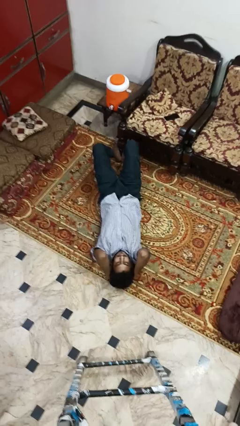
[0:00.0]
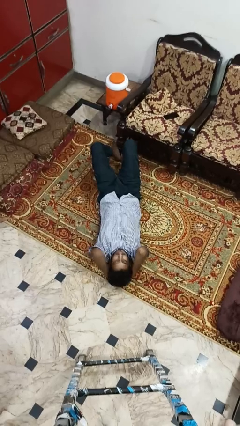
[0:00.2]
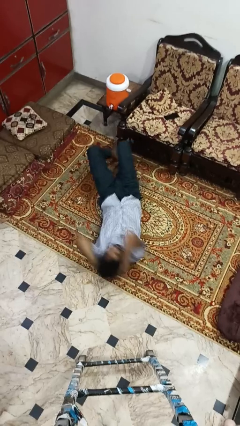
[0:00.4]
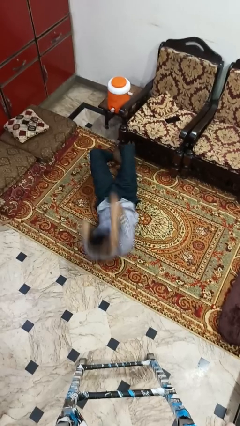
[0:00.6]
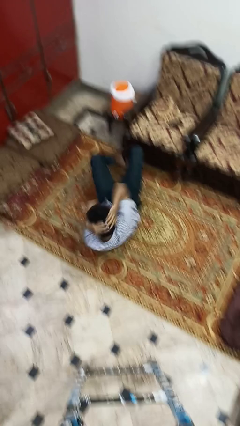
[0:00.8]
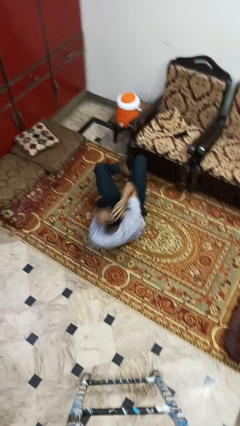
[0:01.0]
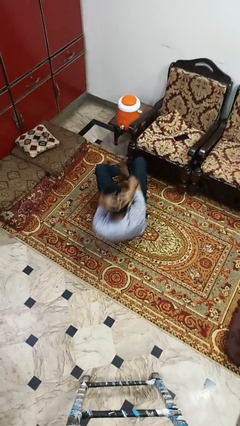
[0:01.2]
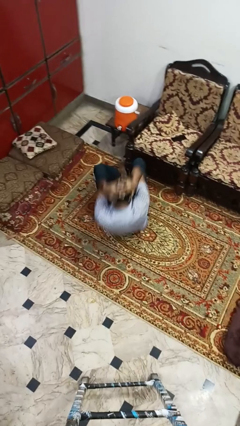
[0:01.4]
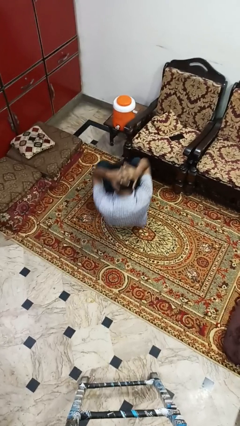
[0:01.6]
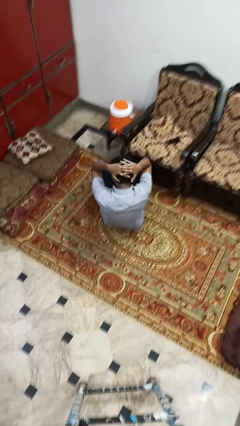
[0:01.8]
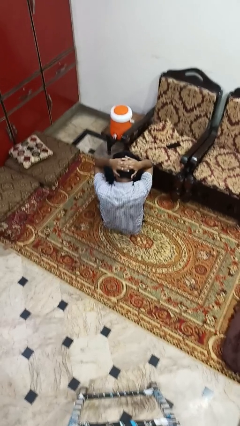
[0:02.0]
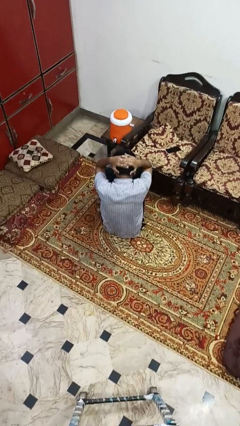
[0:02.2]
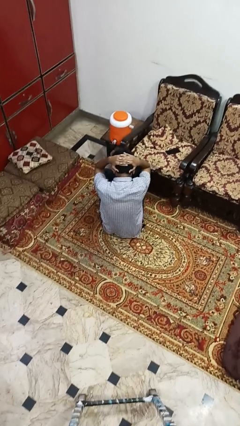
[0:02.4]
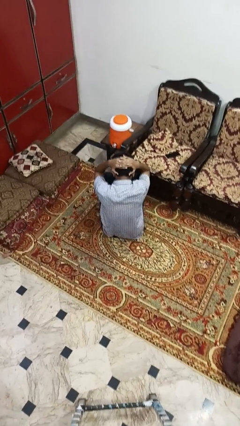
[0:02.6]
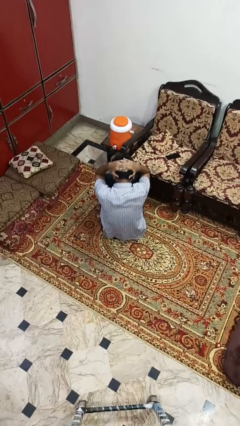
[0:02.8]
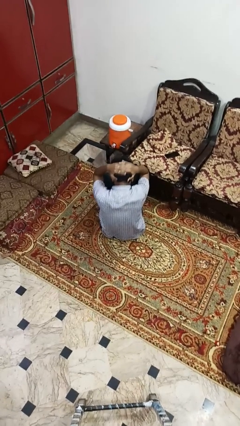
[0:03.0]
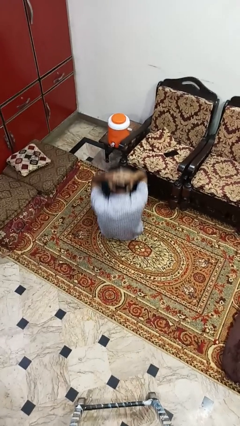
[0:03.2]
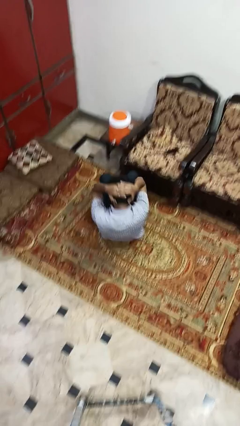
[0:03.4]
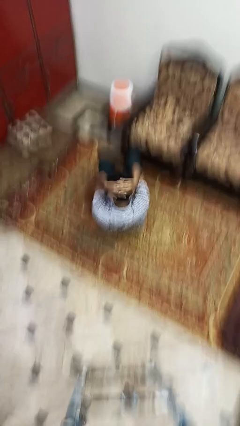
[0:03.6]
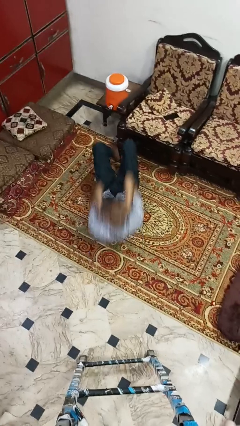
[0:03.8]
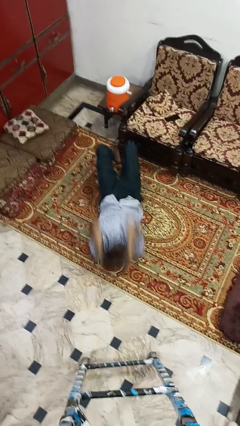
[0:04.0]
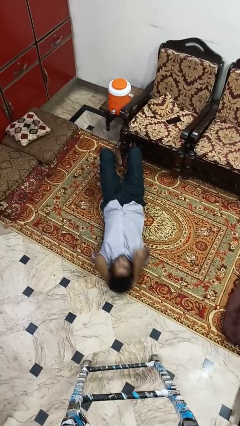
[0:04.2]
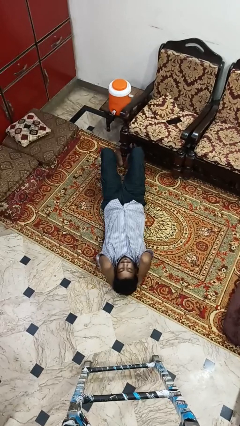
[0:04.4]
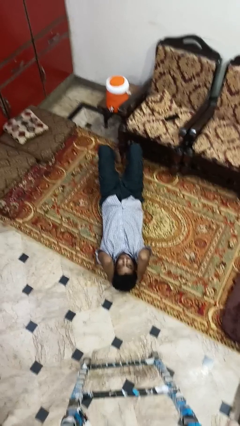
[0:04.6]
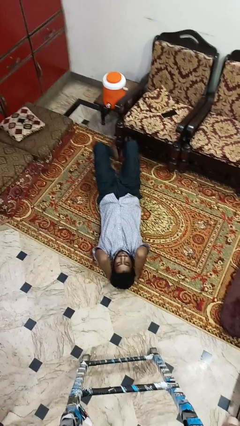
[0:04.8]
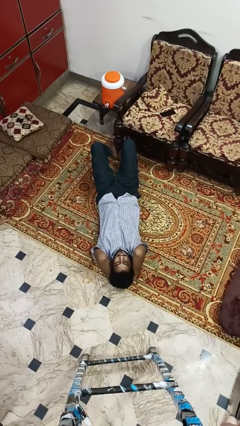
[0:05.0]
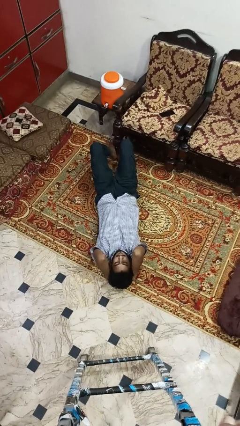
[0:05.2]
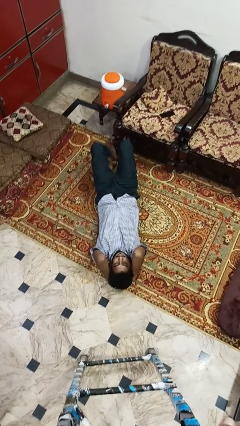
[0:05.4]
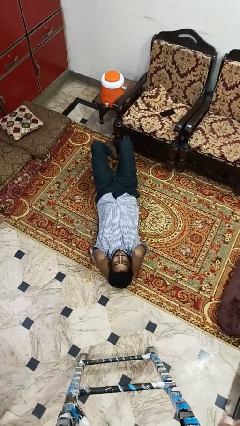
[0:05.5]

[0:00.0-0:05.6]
person exercises with situp

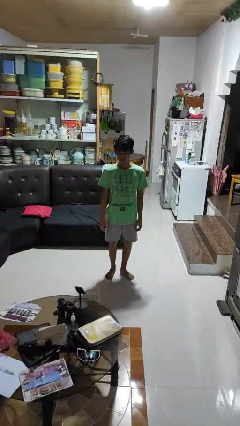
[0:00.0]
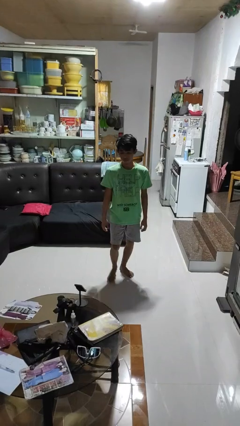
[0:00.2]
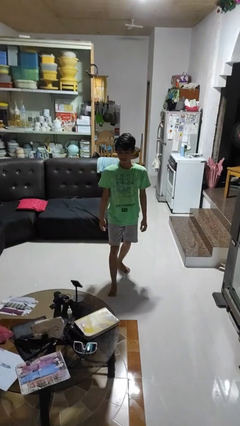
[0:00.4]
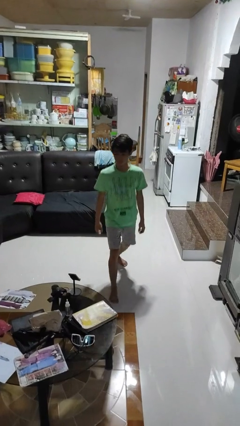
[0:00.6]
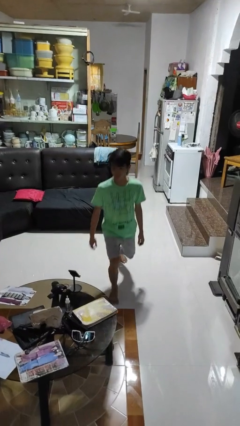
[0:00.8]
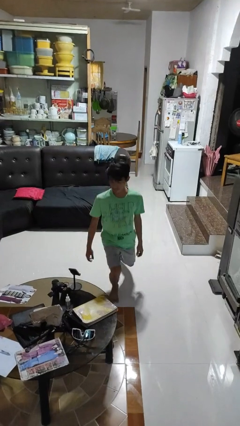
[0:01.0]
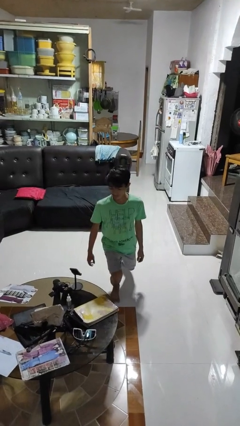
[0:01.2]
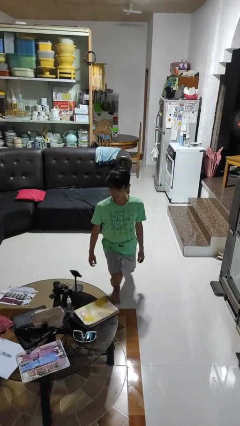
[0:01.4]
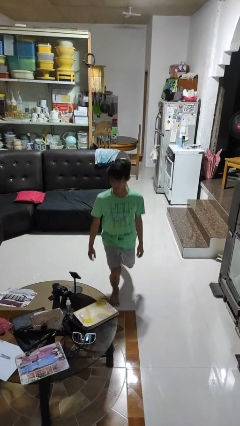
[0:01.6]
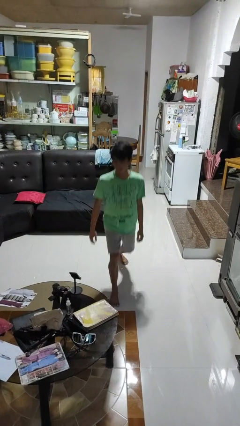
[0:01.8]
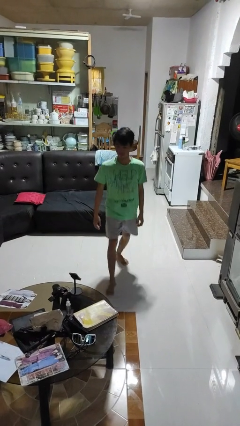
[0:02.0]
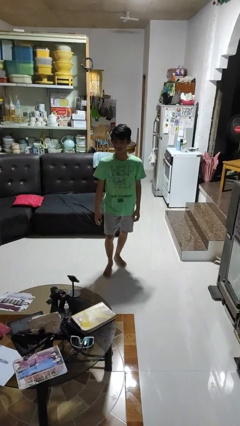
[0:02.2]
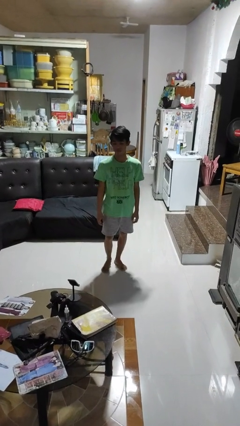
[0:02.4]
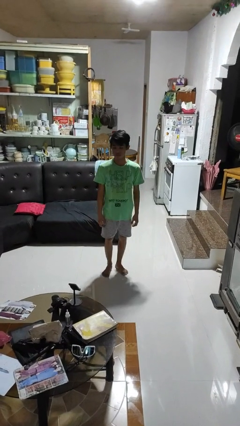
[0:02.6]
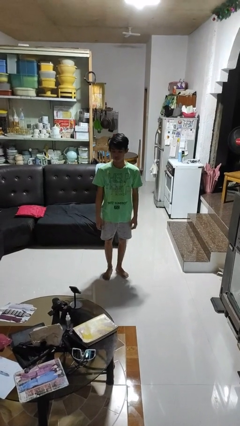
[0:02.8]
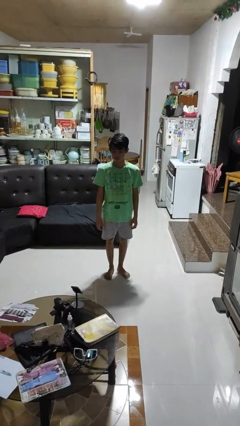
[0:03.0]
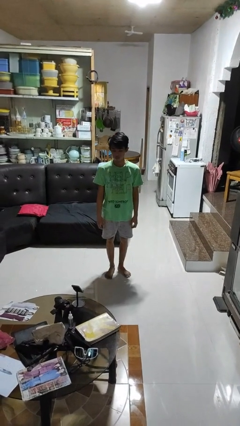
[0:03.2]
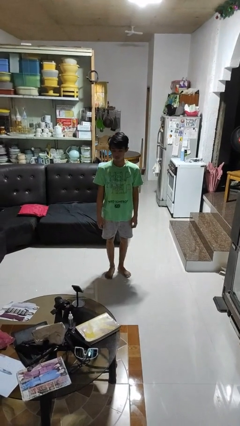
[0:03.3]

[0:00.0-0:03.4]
person exercises with lunges

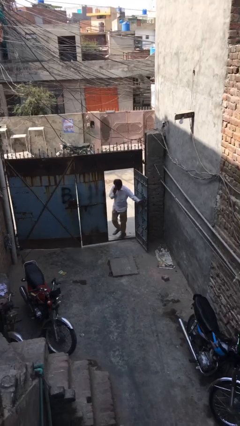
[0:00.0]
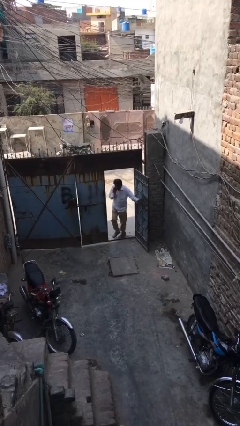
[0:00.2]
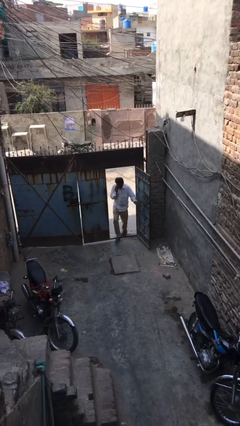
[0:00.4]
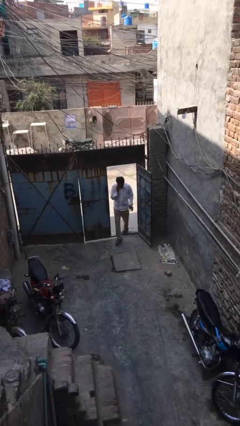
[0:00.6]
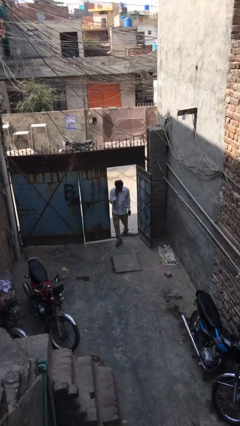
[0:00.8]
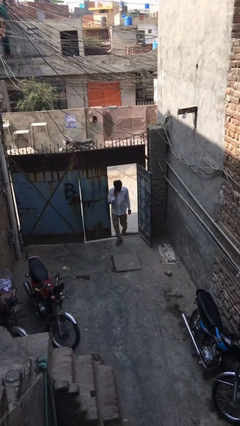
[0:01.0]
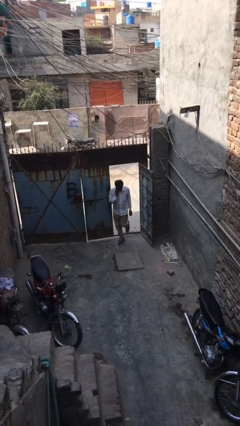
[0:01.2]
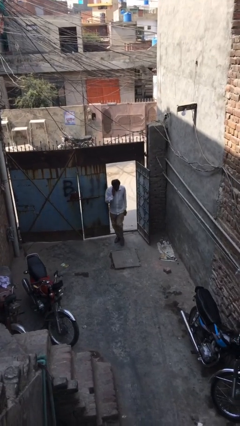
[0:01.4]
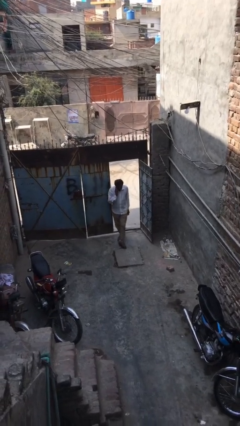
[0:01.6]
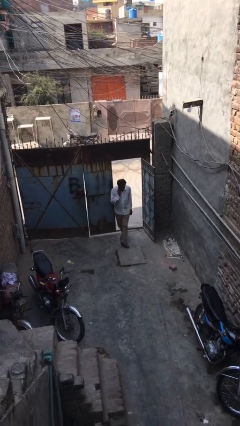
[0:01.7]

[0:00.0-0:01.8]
person enters scene through structure

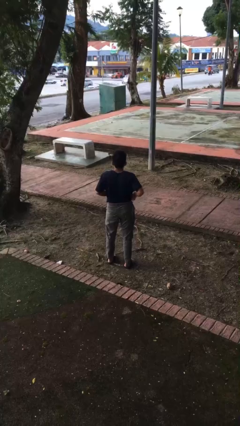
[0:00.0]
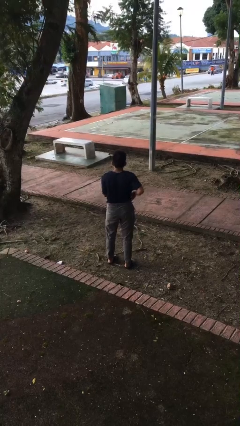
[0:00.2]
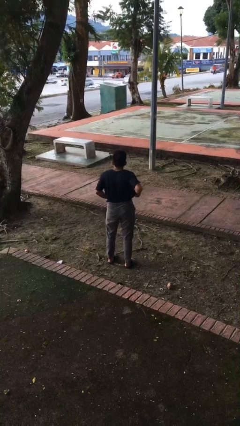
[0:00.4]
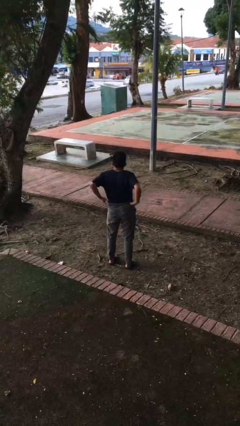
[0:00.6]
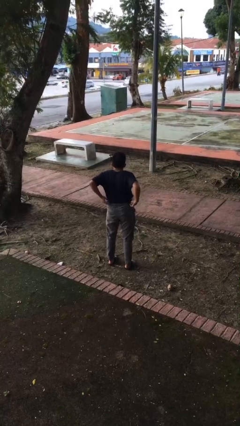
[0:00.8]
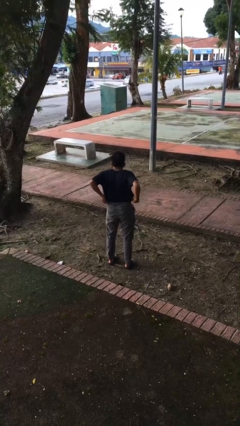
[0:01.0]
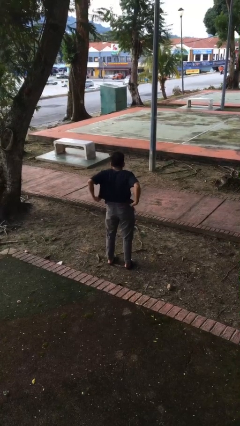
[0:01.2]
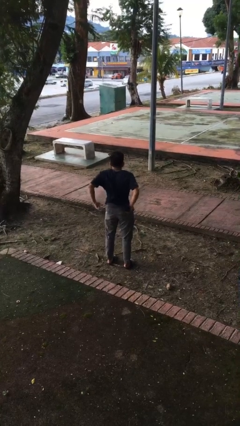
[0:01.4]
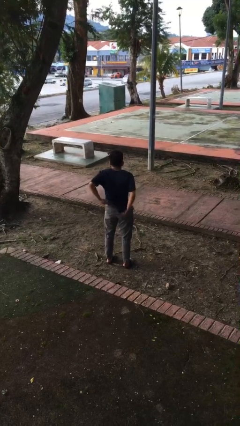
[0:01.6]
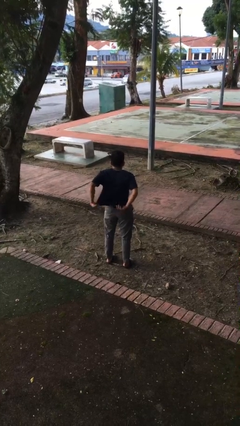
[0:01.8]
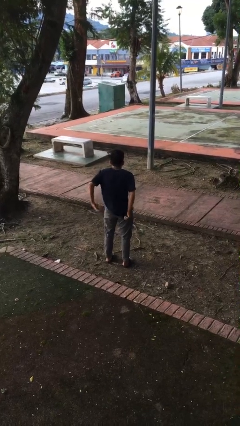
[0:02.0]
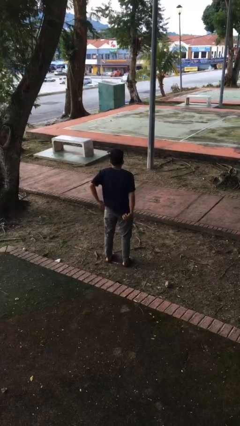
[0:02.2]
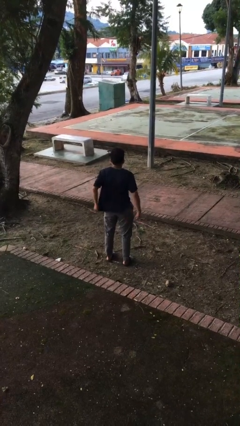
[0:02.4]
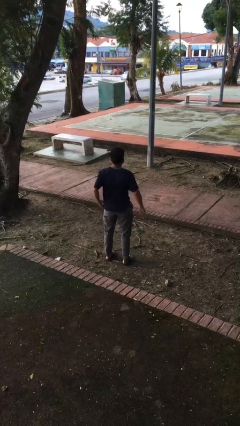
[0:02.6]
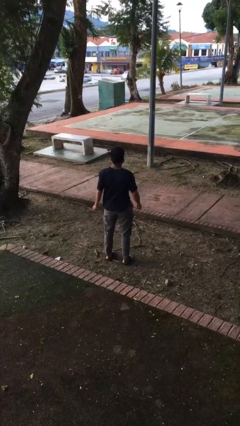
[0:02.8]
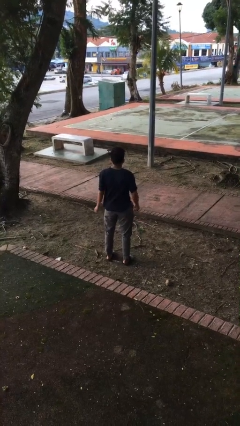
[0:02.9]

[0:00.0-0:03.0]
person untucks shirt

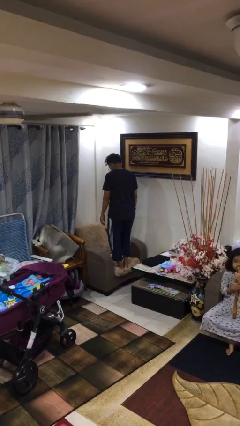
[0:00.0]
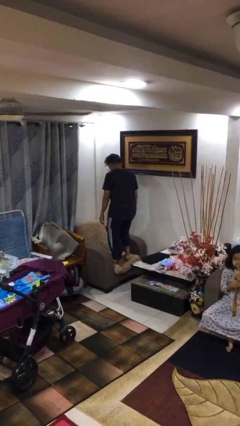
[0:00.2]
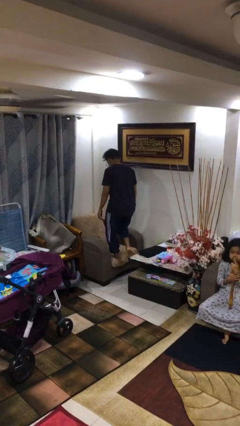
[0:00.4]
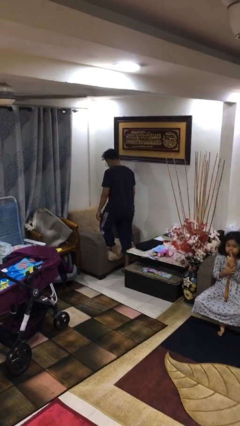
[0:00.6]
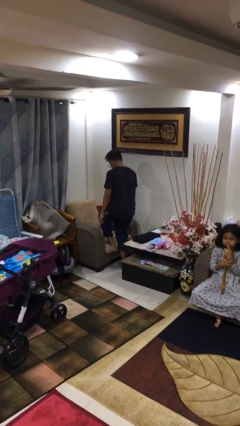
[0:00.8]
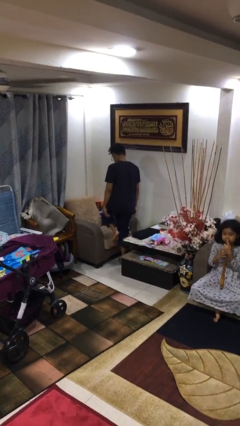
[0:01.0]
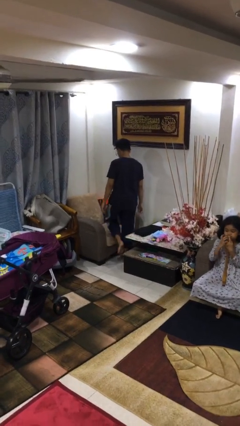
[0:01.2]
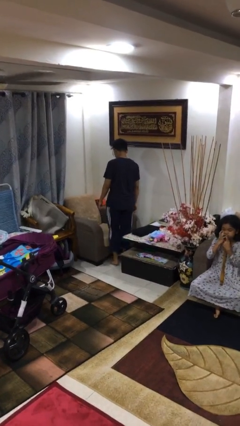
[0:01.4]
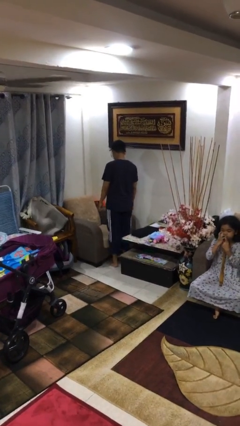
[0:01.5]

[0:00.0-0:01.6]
person climbs off couch

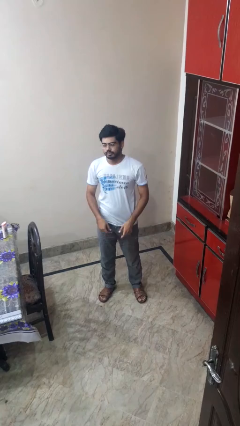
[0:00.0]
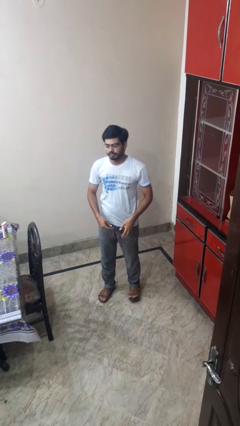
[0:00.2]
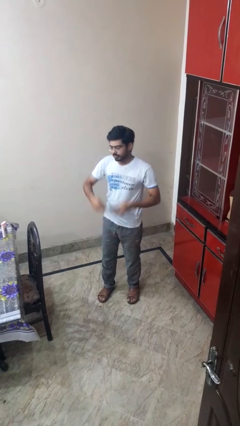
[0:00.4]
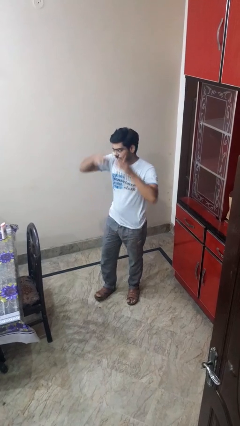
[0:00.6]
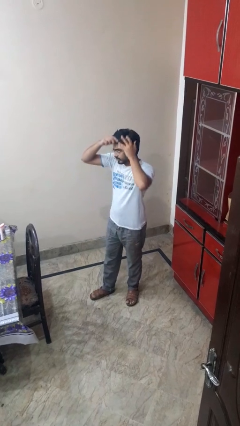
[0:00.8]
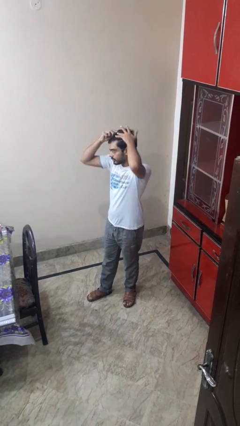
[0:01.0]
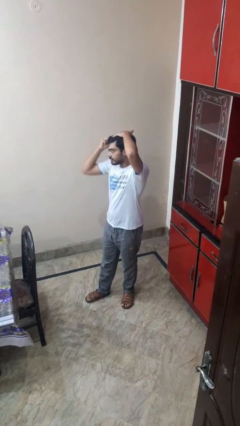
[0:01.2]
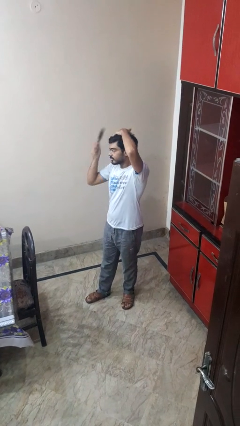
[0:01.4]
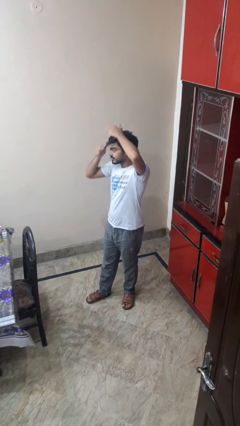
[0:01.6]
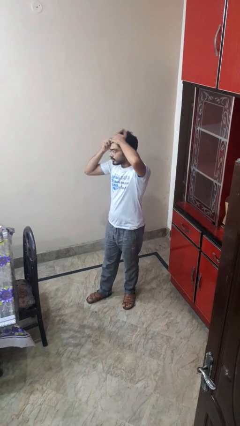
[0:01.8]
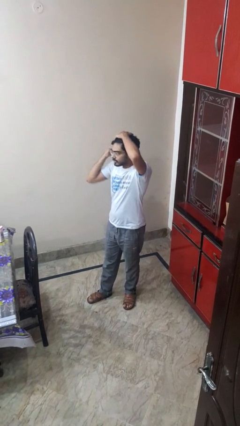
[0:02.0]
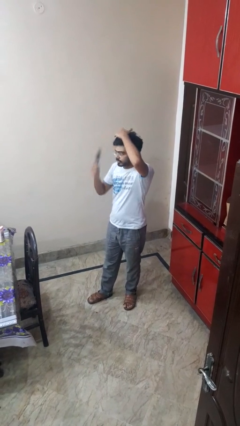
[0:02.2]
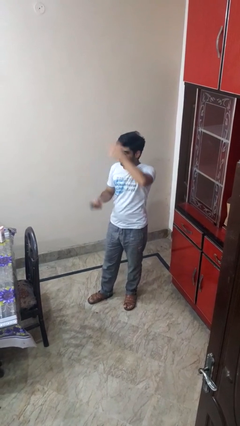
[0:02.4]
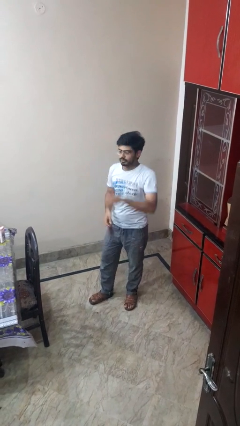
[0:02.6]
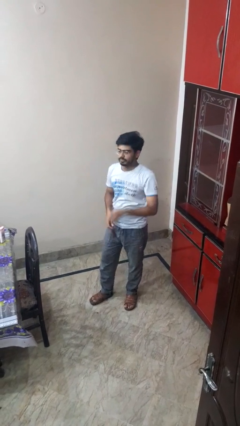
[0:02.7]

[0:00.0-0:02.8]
person brushes hair
